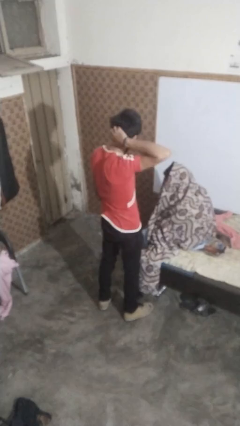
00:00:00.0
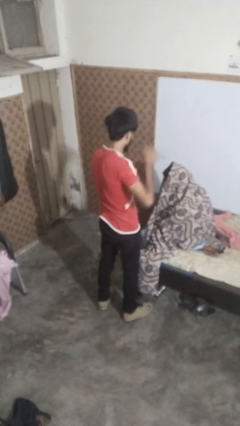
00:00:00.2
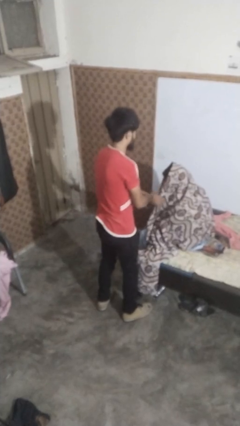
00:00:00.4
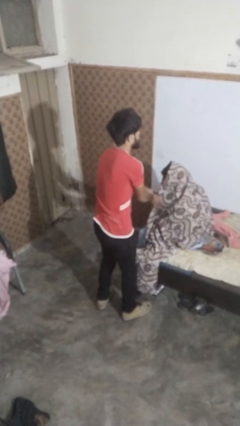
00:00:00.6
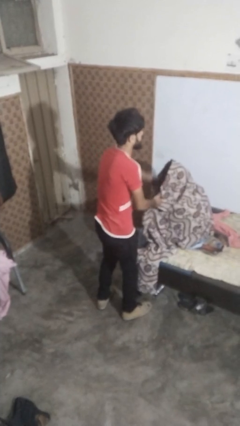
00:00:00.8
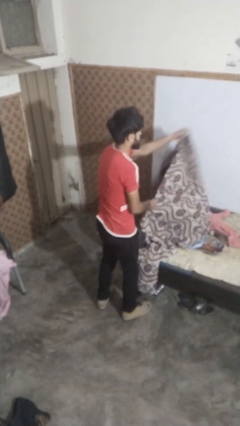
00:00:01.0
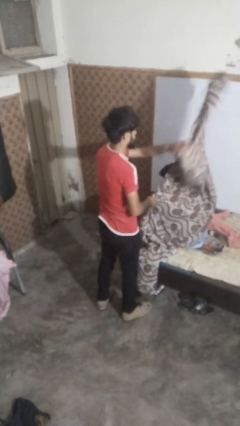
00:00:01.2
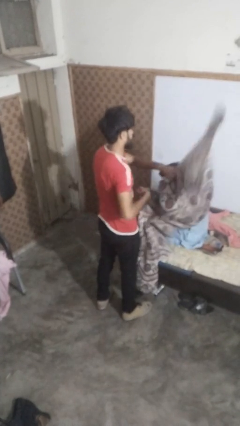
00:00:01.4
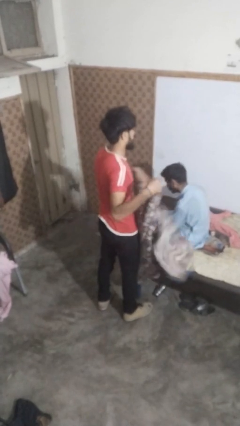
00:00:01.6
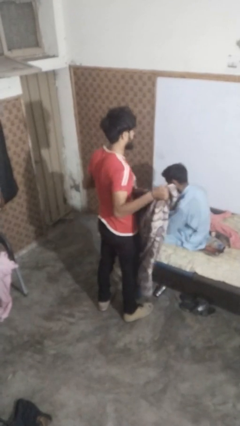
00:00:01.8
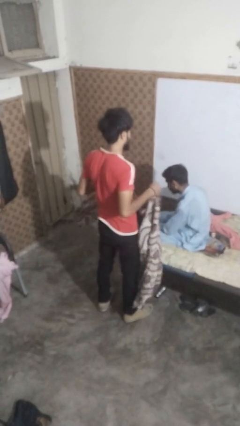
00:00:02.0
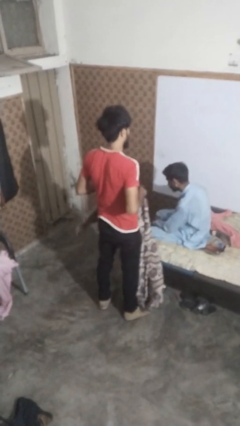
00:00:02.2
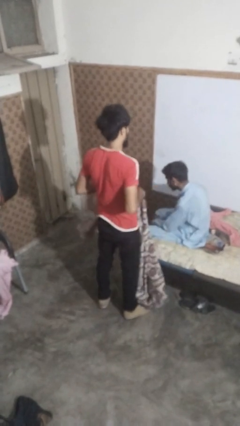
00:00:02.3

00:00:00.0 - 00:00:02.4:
person uncovers friend with blanket

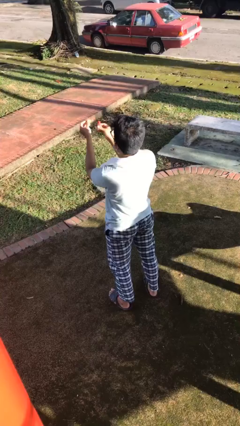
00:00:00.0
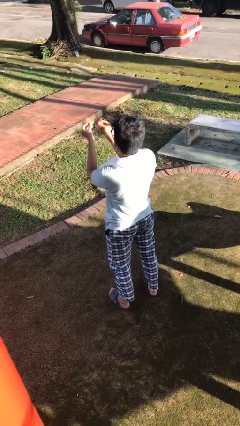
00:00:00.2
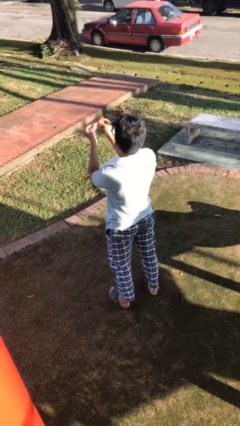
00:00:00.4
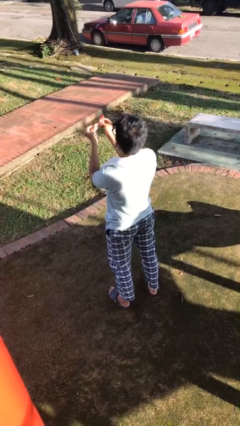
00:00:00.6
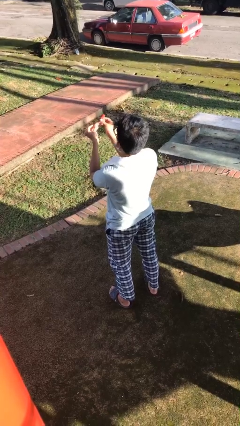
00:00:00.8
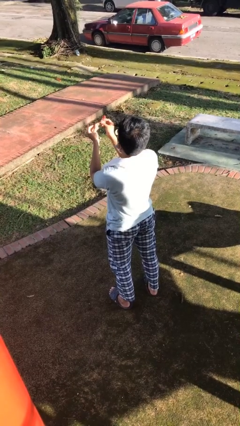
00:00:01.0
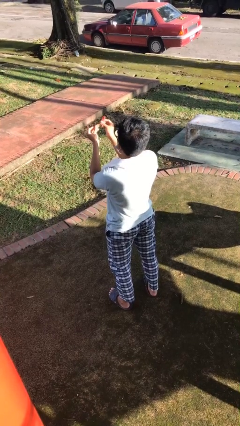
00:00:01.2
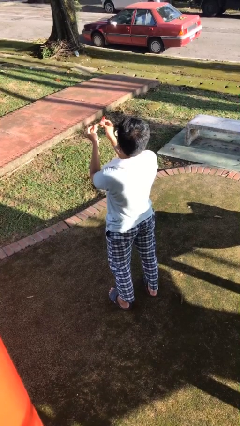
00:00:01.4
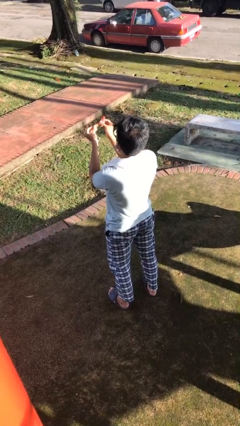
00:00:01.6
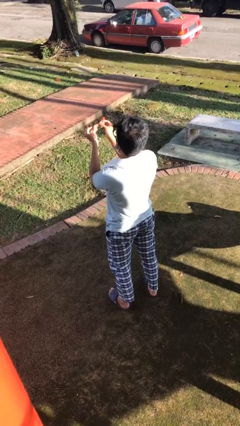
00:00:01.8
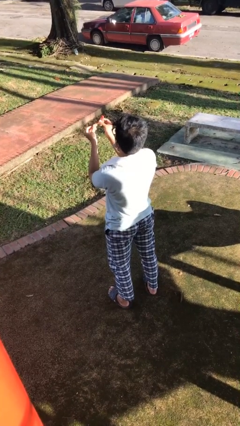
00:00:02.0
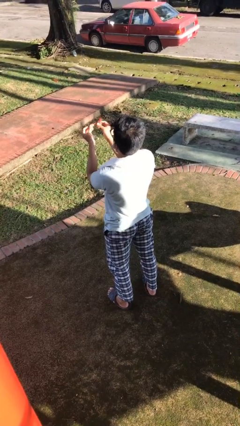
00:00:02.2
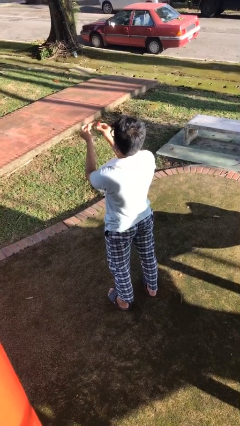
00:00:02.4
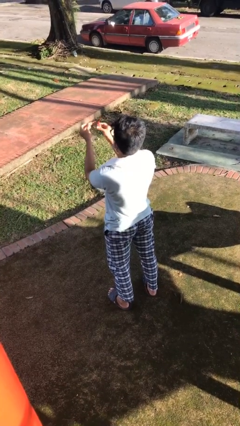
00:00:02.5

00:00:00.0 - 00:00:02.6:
person paints fingernails

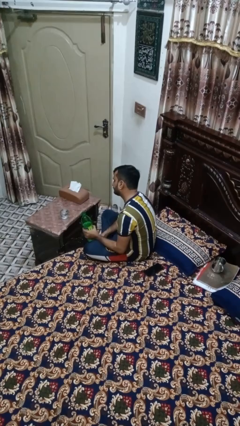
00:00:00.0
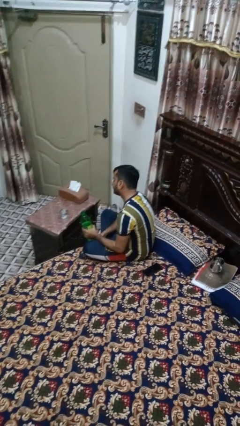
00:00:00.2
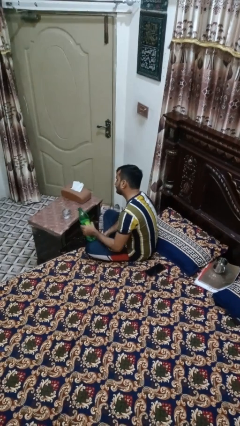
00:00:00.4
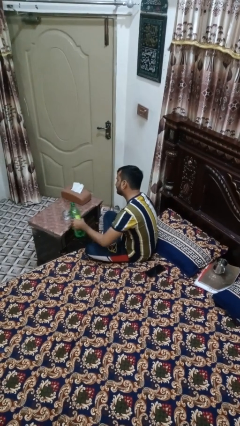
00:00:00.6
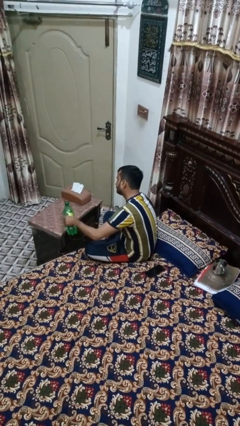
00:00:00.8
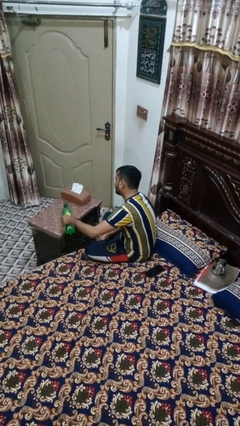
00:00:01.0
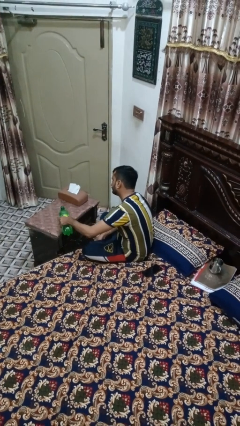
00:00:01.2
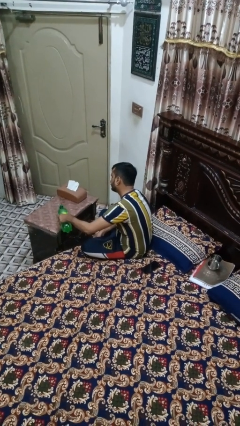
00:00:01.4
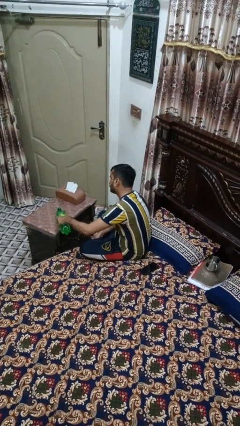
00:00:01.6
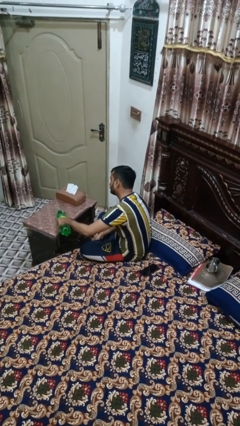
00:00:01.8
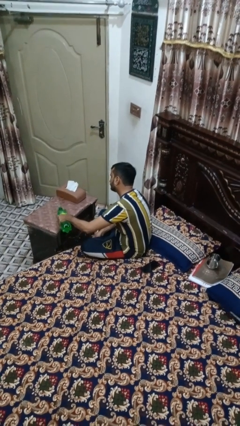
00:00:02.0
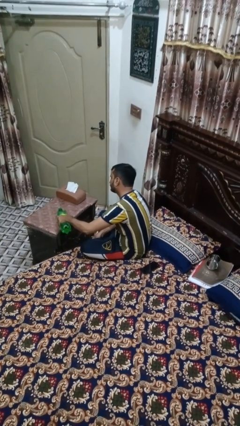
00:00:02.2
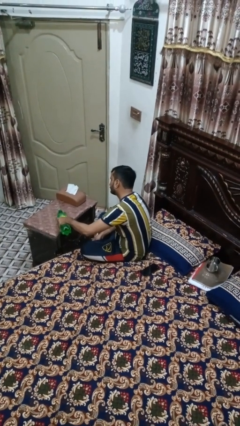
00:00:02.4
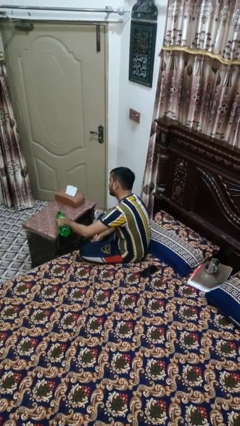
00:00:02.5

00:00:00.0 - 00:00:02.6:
person pours liquid into cup

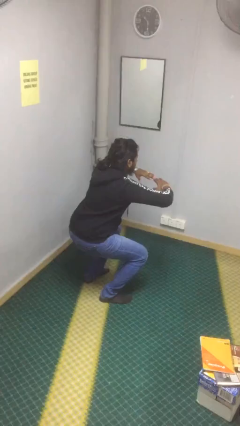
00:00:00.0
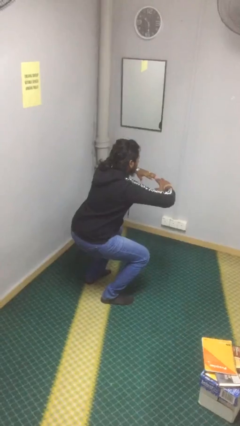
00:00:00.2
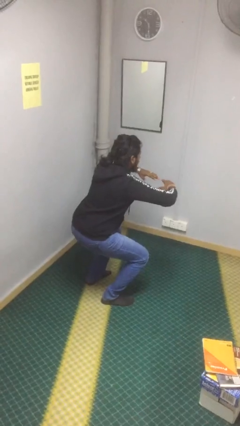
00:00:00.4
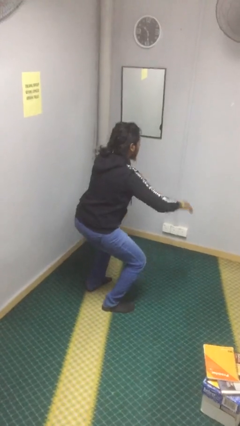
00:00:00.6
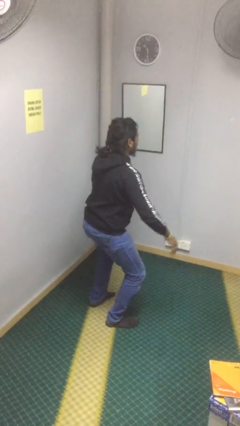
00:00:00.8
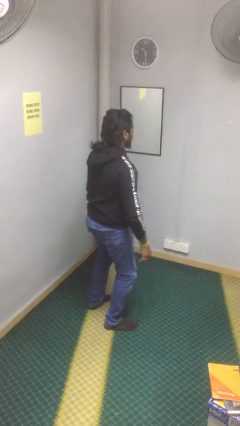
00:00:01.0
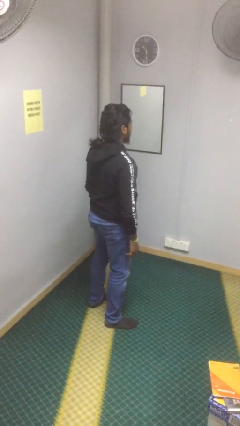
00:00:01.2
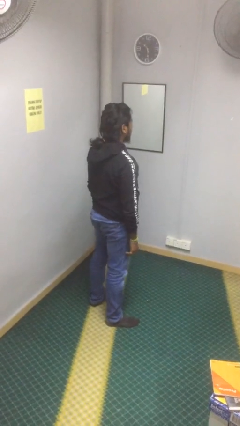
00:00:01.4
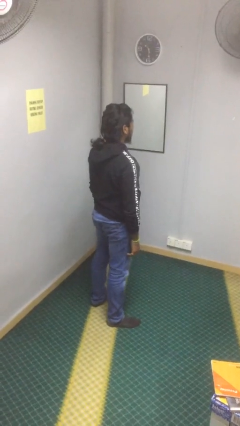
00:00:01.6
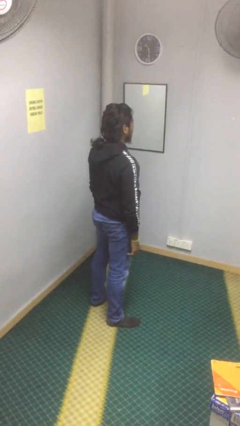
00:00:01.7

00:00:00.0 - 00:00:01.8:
person stands up

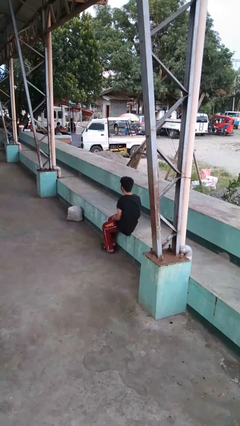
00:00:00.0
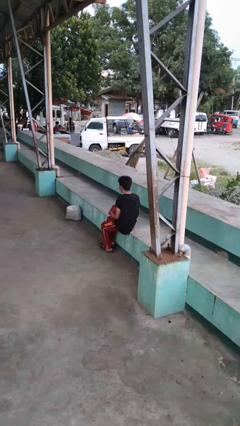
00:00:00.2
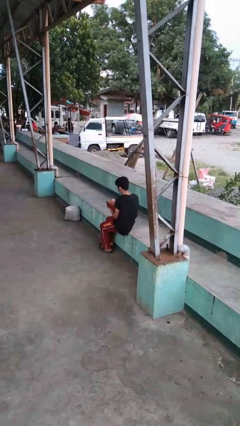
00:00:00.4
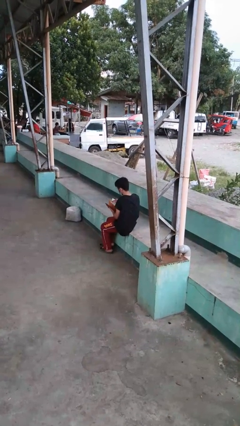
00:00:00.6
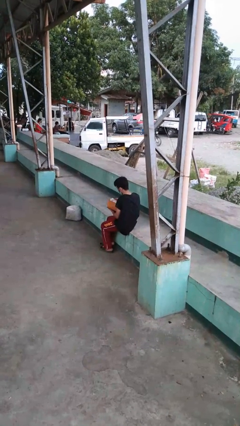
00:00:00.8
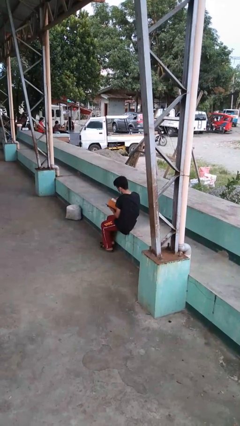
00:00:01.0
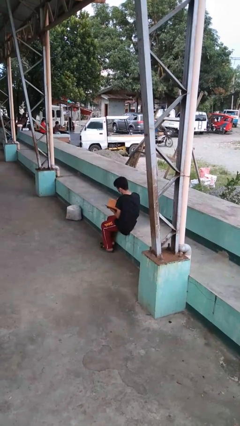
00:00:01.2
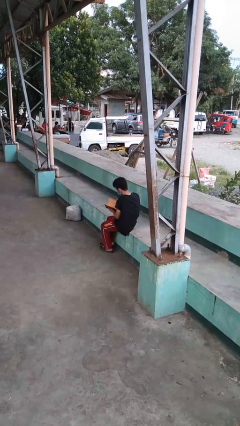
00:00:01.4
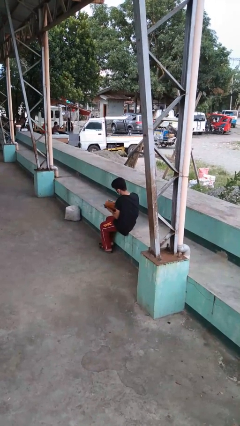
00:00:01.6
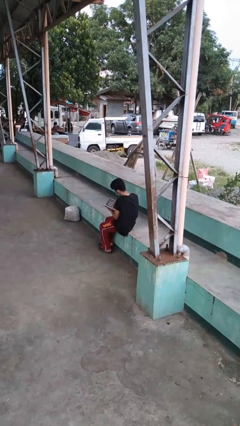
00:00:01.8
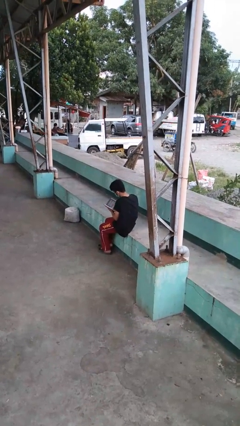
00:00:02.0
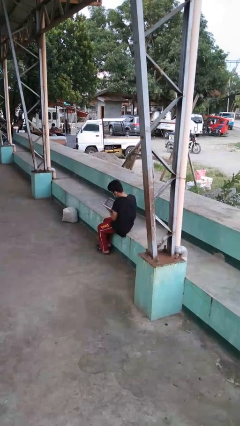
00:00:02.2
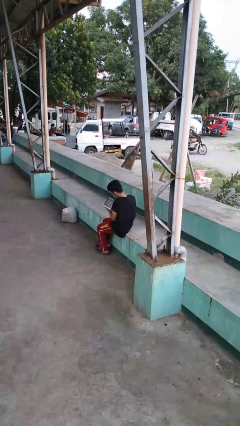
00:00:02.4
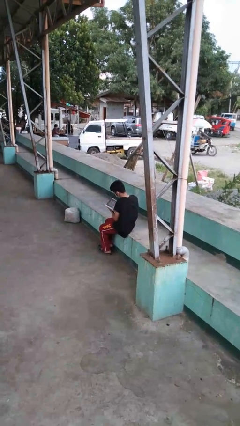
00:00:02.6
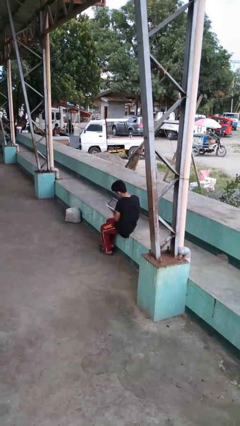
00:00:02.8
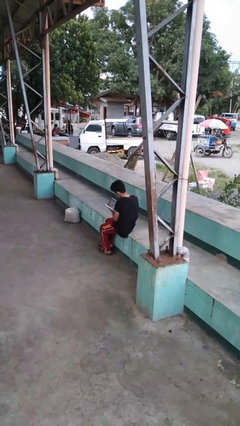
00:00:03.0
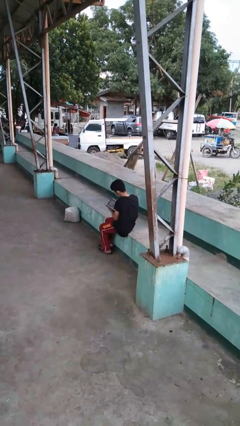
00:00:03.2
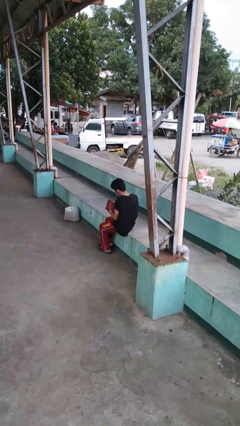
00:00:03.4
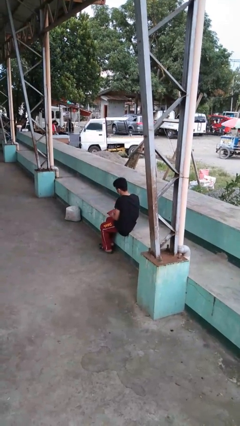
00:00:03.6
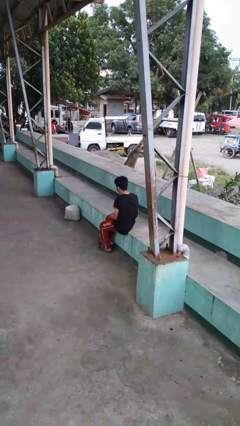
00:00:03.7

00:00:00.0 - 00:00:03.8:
person reads book

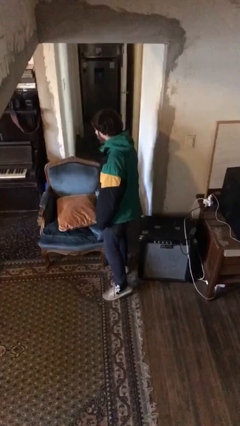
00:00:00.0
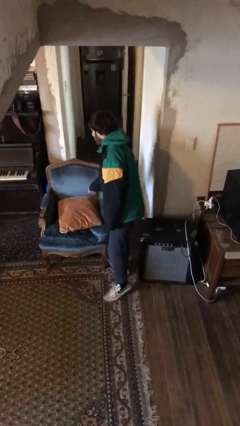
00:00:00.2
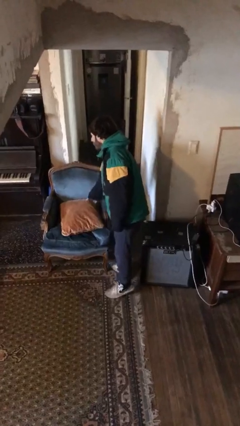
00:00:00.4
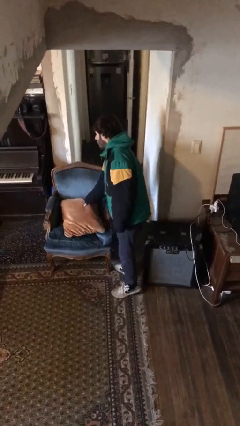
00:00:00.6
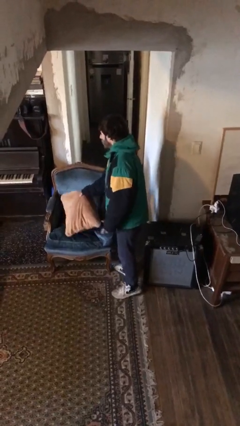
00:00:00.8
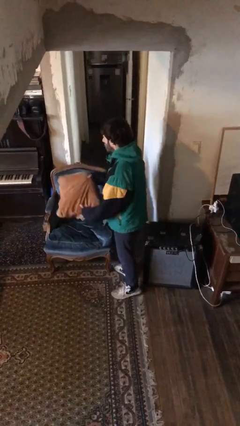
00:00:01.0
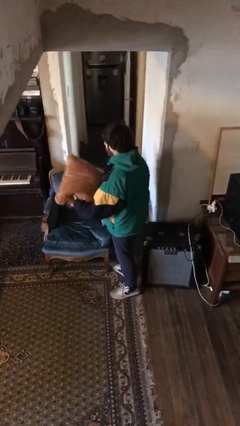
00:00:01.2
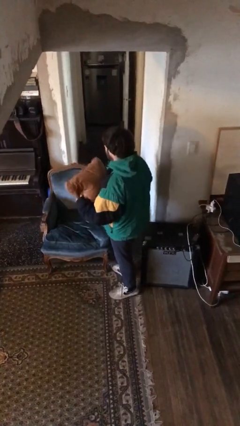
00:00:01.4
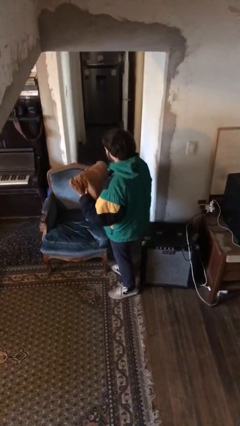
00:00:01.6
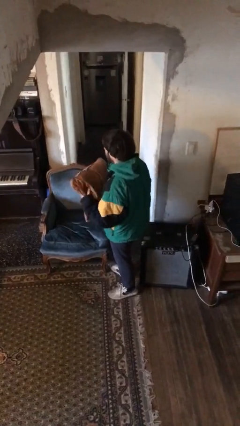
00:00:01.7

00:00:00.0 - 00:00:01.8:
person picks up object from couch

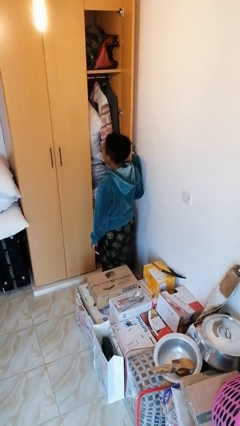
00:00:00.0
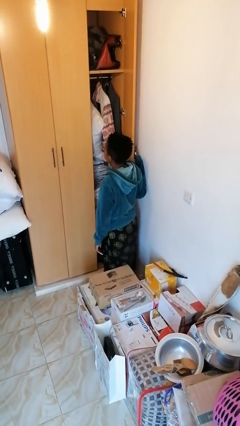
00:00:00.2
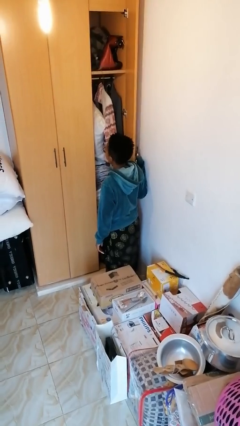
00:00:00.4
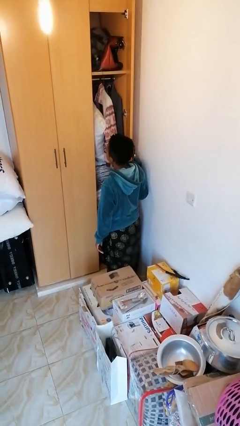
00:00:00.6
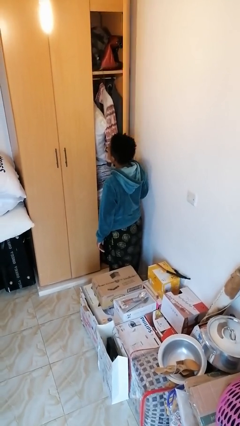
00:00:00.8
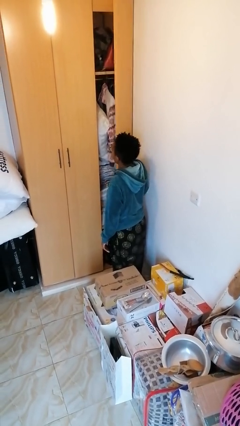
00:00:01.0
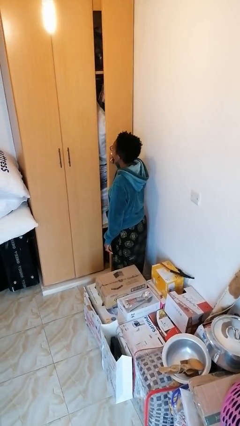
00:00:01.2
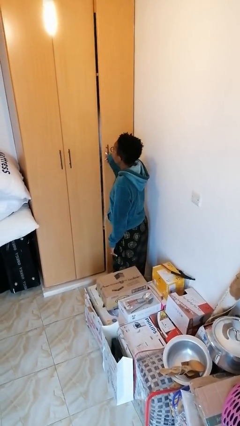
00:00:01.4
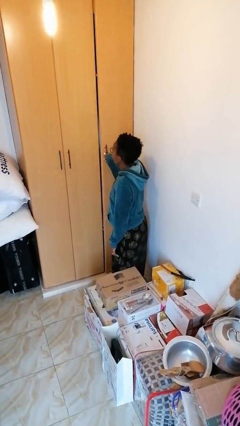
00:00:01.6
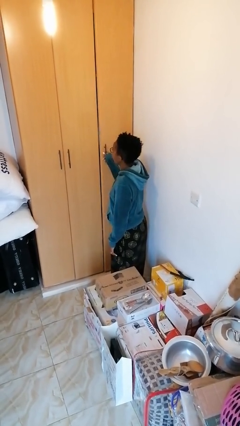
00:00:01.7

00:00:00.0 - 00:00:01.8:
person closes closet door

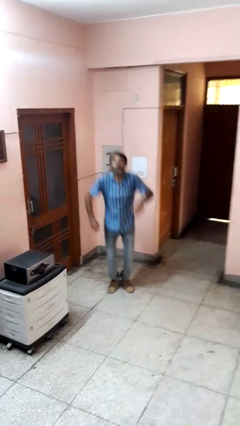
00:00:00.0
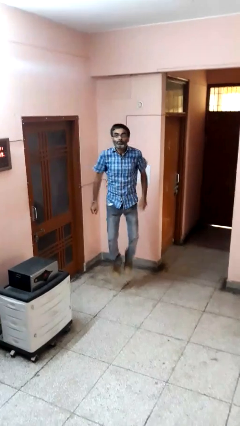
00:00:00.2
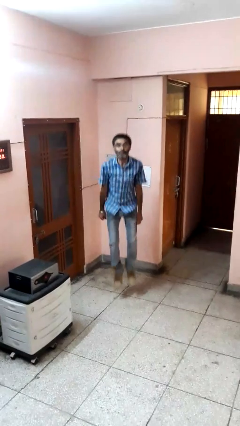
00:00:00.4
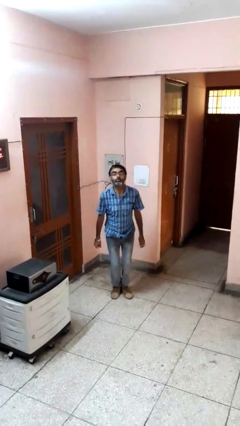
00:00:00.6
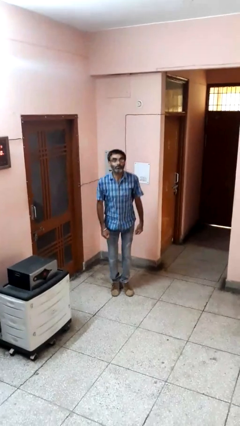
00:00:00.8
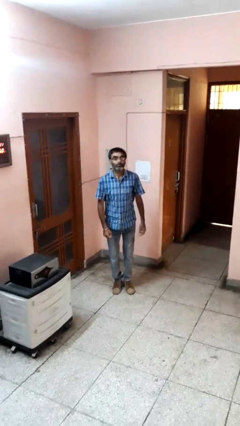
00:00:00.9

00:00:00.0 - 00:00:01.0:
person jumps
